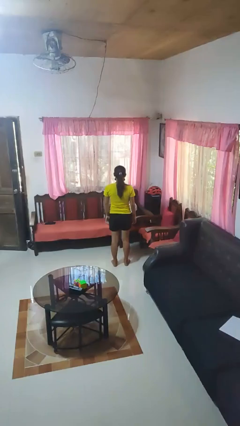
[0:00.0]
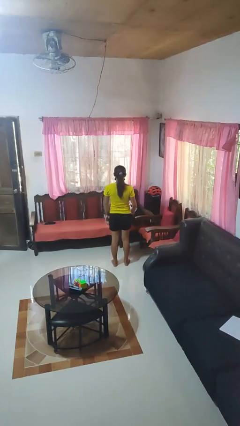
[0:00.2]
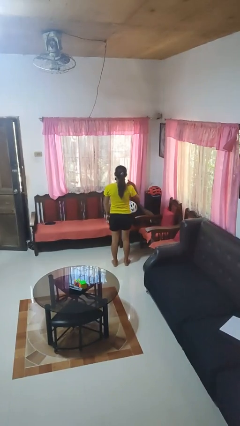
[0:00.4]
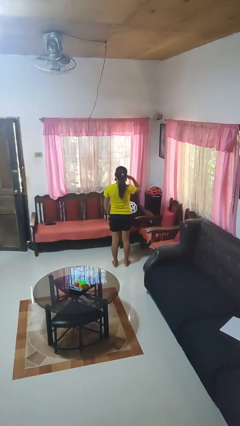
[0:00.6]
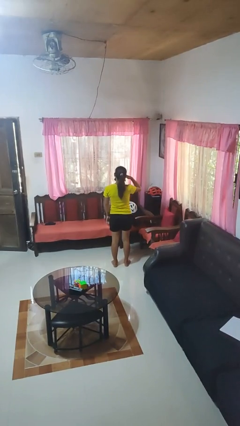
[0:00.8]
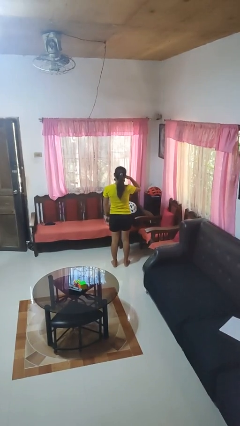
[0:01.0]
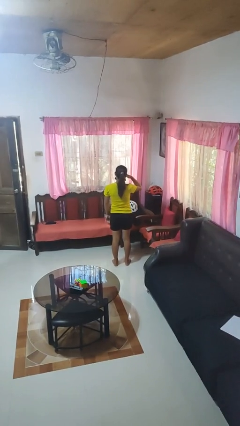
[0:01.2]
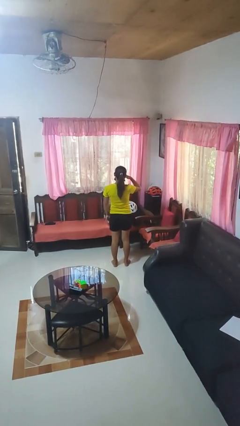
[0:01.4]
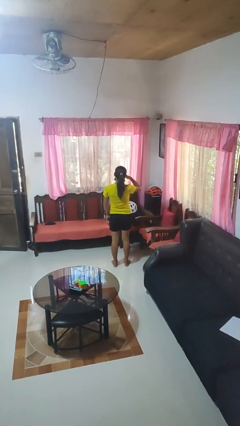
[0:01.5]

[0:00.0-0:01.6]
person gestures call me

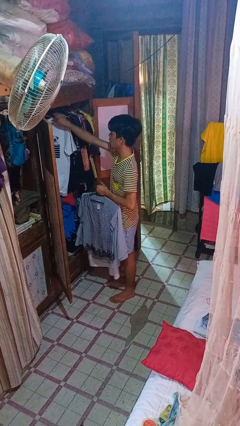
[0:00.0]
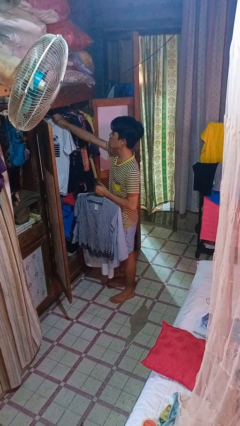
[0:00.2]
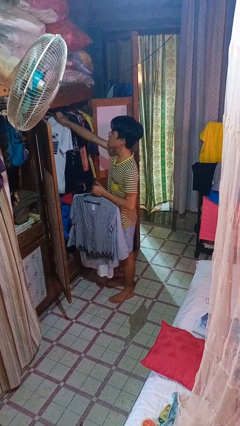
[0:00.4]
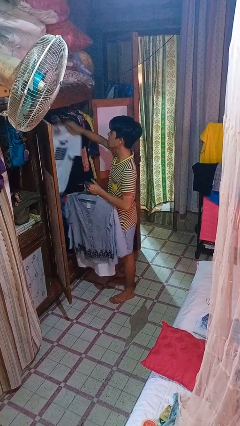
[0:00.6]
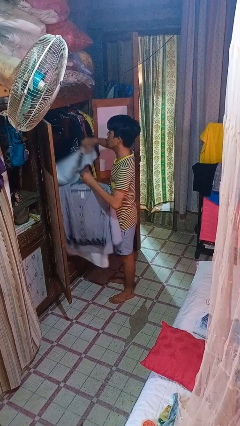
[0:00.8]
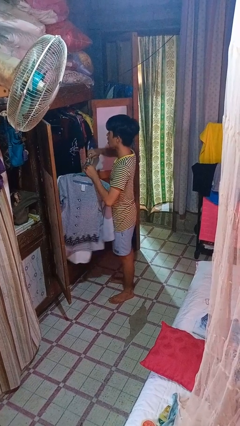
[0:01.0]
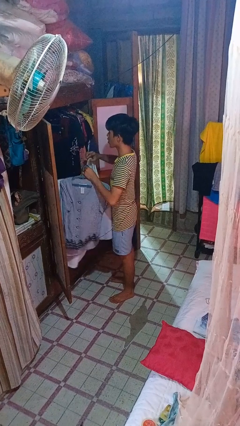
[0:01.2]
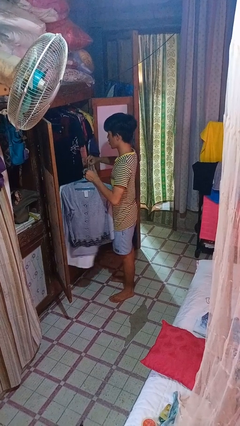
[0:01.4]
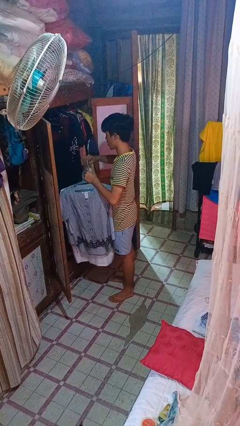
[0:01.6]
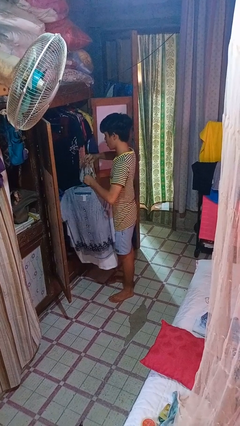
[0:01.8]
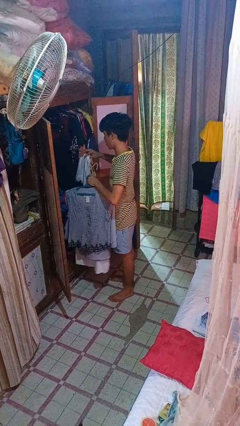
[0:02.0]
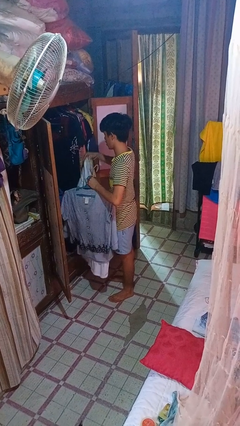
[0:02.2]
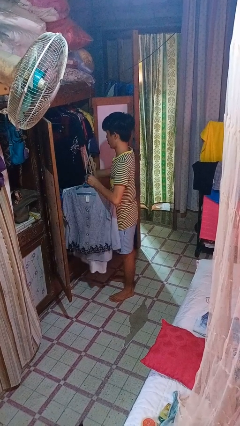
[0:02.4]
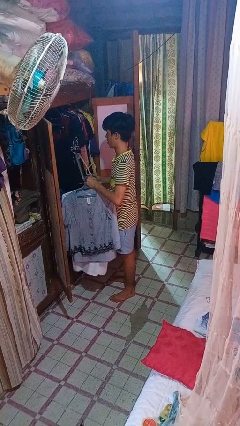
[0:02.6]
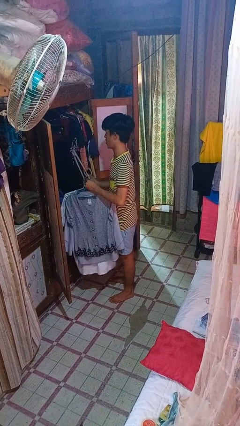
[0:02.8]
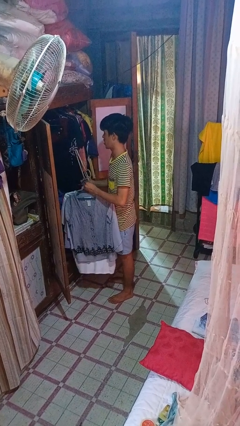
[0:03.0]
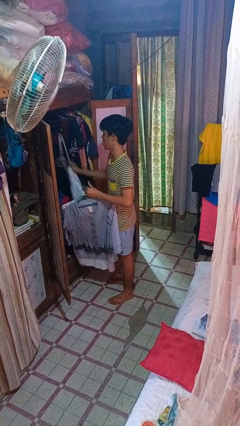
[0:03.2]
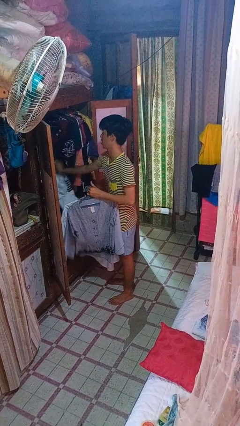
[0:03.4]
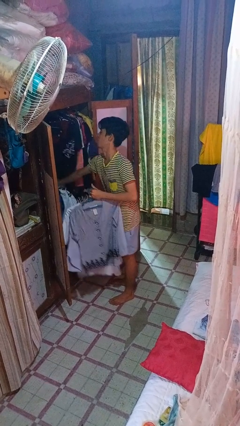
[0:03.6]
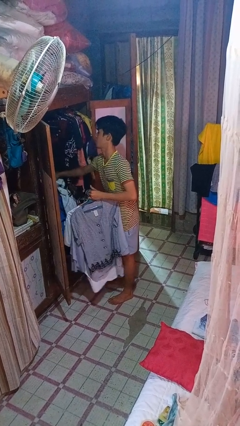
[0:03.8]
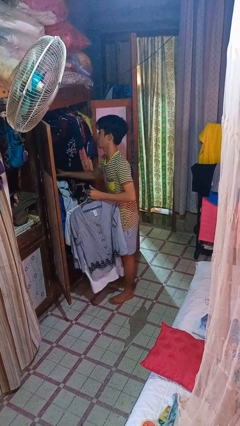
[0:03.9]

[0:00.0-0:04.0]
person takes clothes from closet

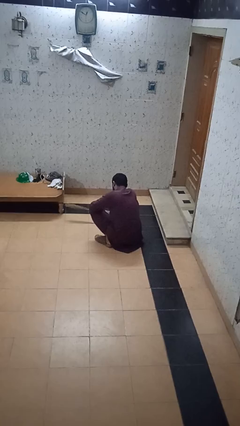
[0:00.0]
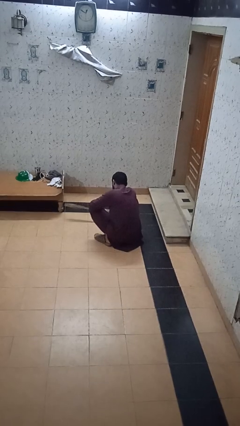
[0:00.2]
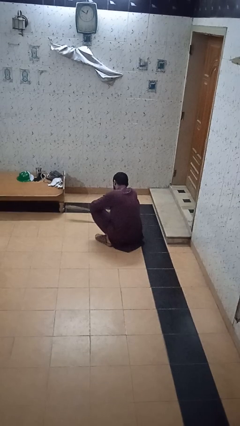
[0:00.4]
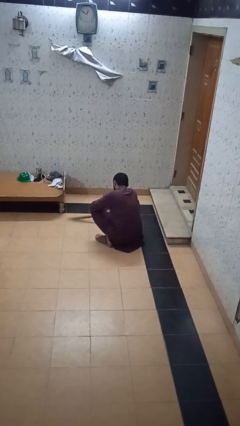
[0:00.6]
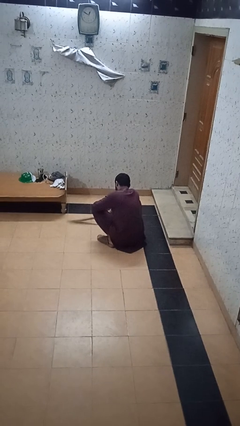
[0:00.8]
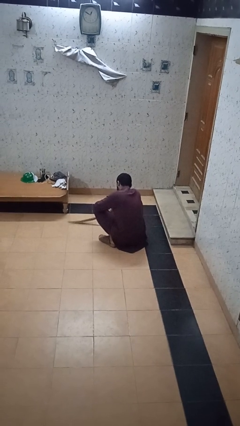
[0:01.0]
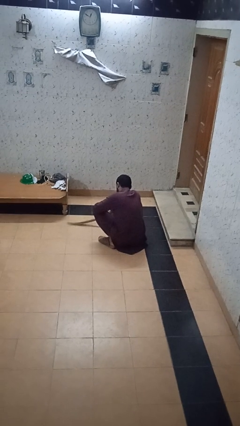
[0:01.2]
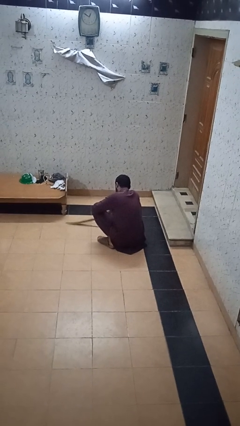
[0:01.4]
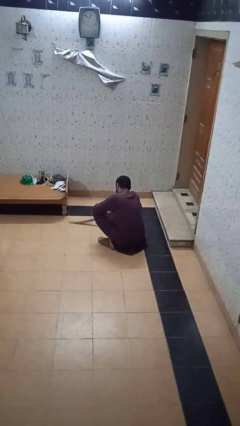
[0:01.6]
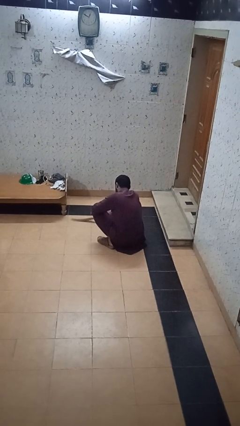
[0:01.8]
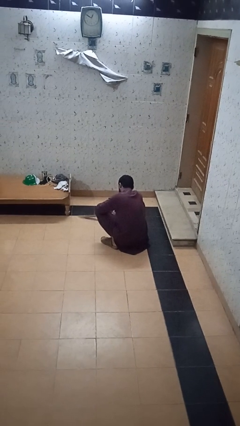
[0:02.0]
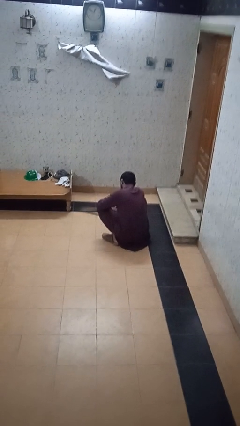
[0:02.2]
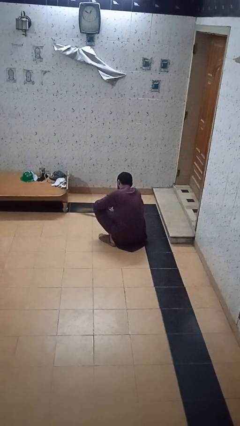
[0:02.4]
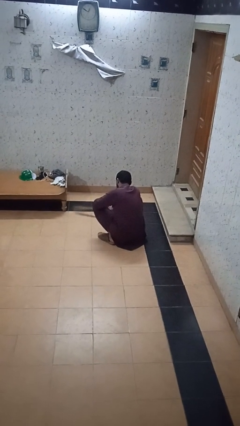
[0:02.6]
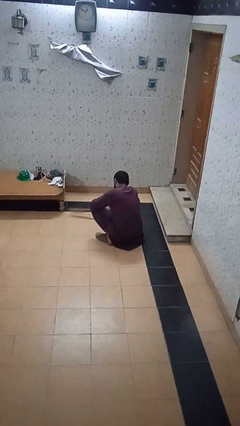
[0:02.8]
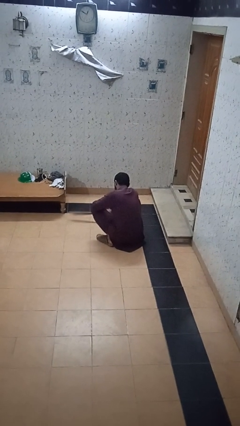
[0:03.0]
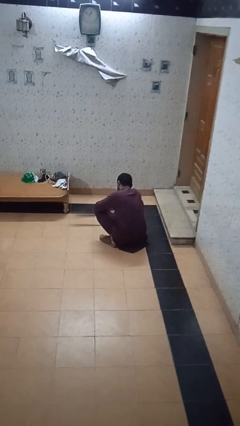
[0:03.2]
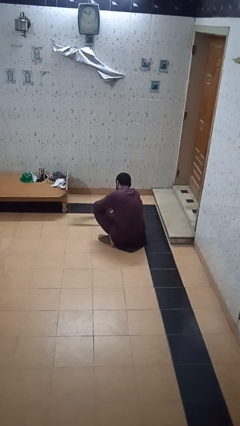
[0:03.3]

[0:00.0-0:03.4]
person sweeps floor

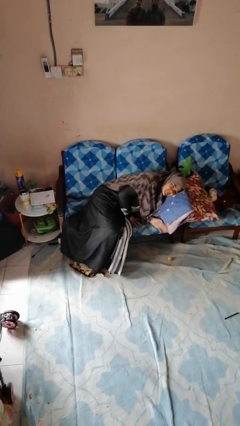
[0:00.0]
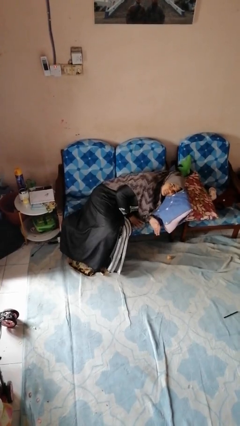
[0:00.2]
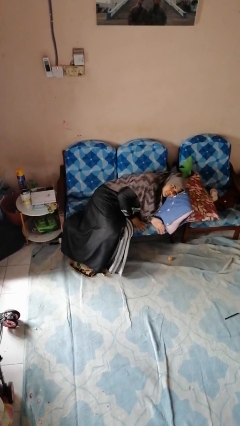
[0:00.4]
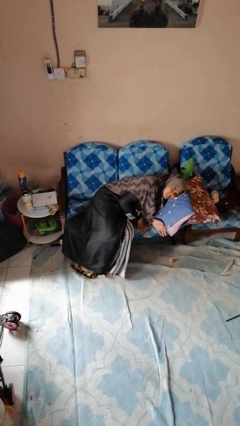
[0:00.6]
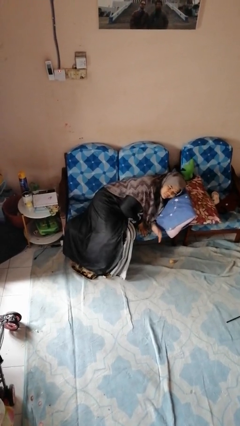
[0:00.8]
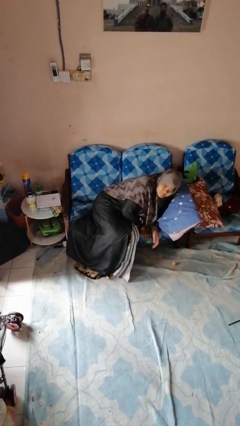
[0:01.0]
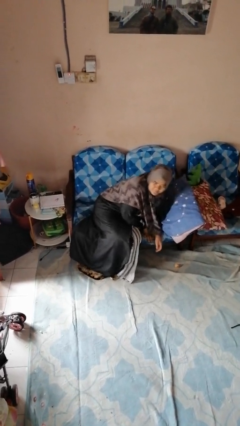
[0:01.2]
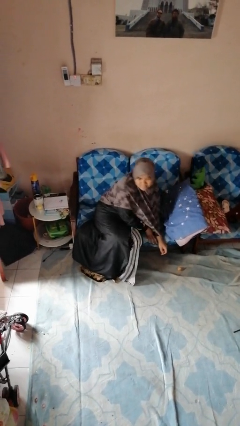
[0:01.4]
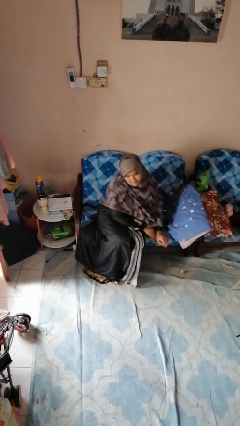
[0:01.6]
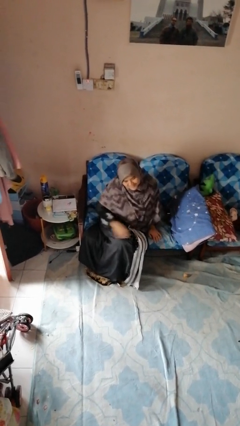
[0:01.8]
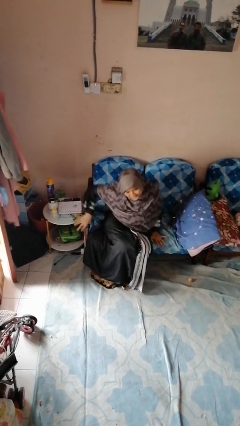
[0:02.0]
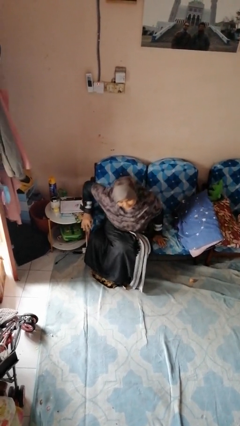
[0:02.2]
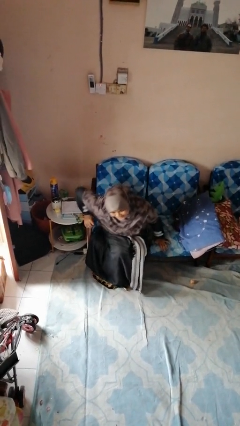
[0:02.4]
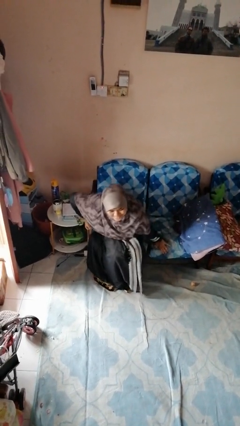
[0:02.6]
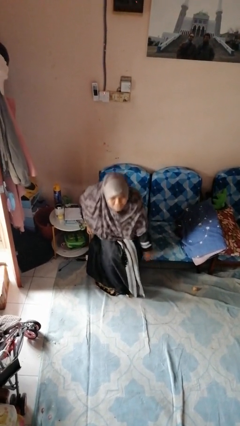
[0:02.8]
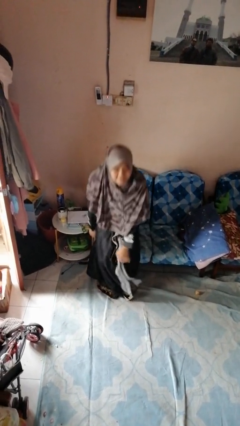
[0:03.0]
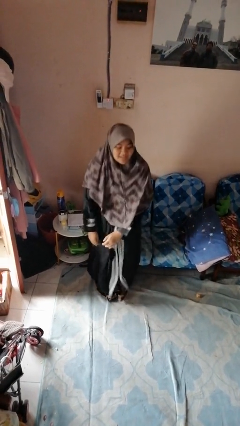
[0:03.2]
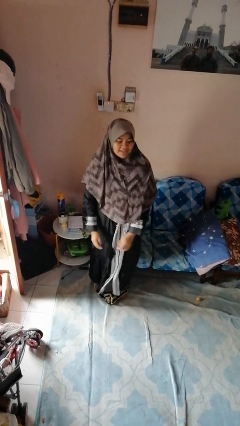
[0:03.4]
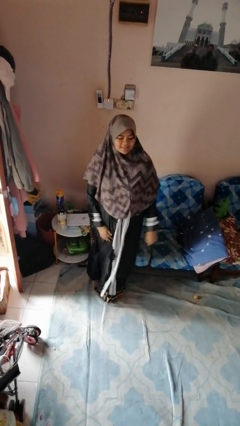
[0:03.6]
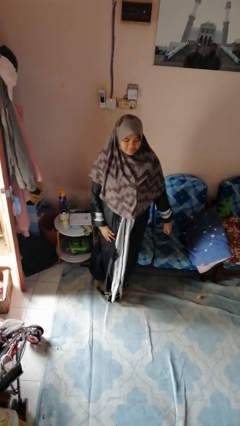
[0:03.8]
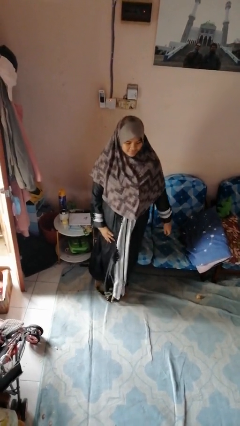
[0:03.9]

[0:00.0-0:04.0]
person stands up

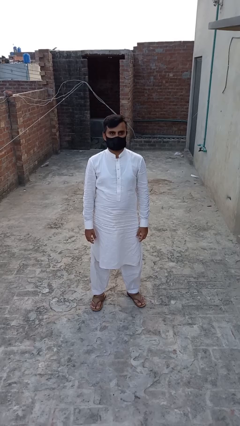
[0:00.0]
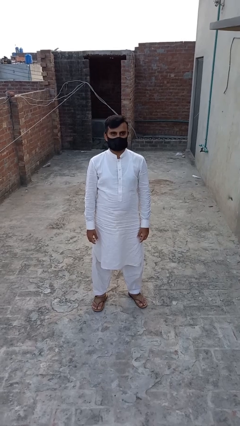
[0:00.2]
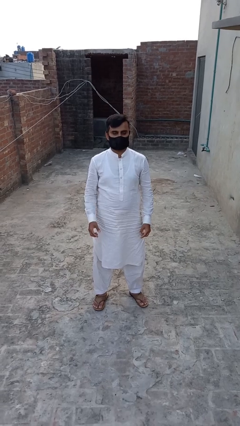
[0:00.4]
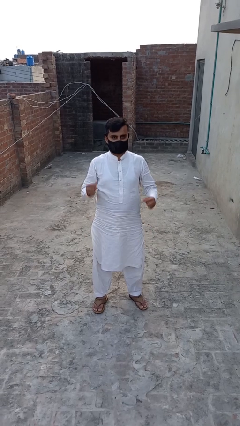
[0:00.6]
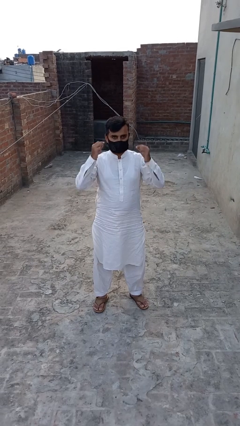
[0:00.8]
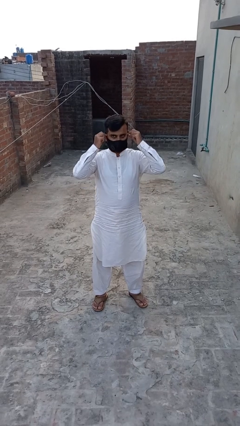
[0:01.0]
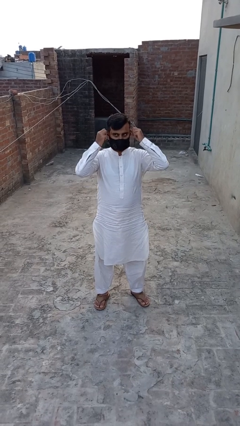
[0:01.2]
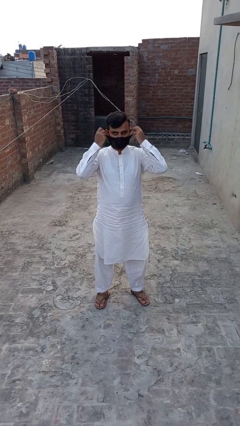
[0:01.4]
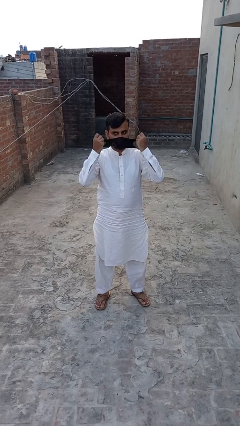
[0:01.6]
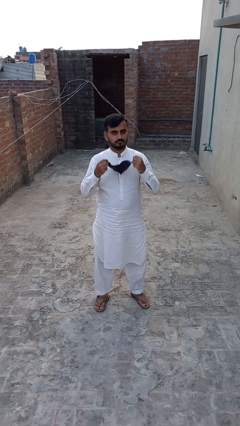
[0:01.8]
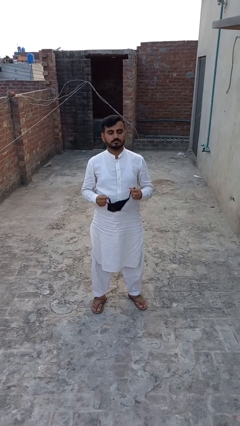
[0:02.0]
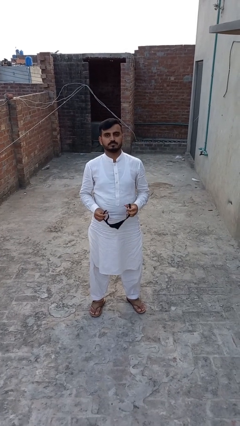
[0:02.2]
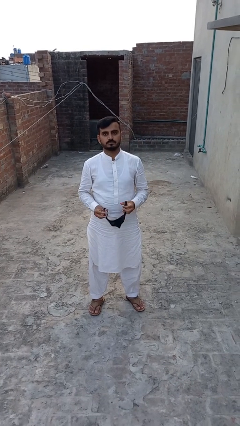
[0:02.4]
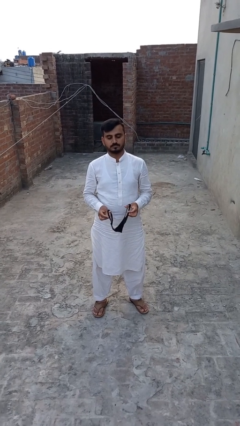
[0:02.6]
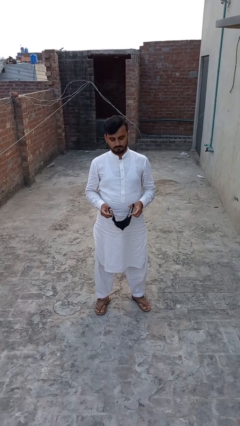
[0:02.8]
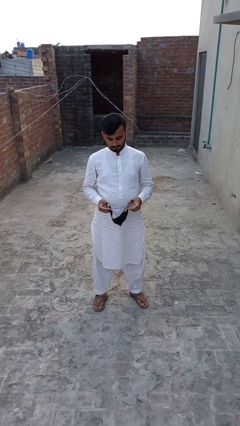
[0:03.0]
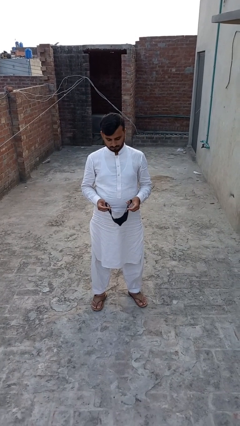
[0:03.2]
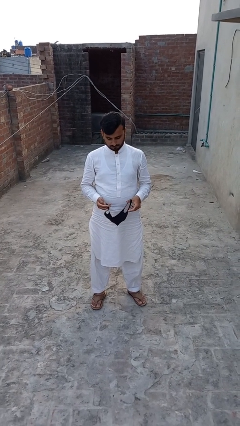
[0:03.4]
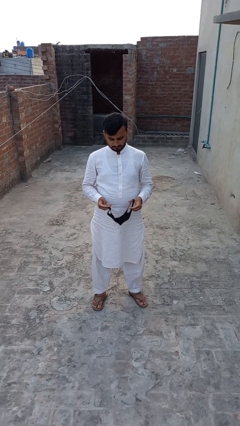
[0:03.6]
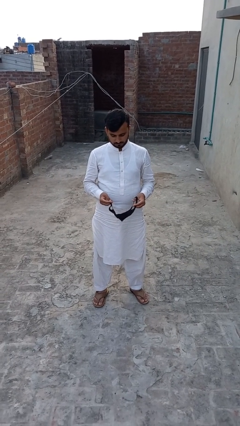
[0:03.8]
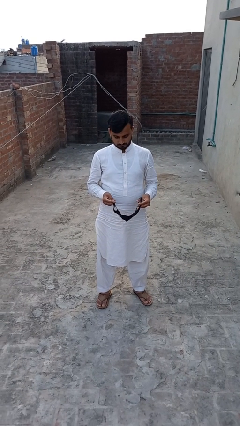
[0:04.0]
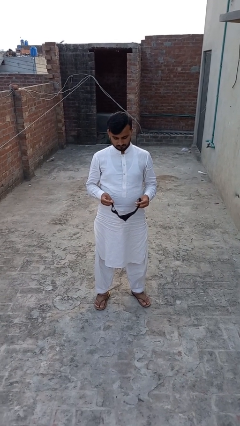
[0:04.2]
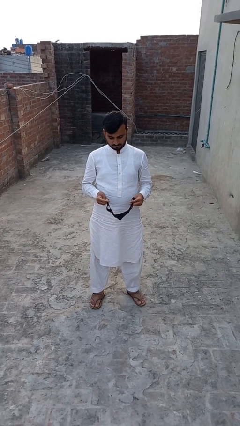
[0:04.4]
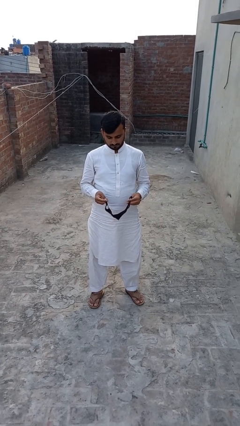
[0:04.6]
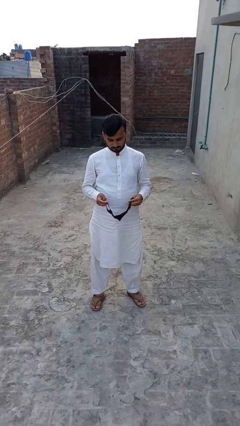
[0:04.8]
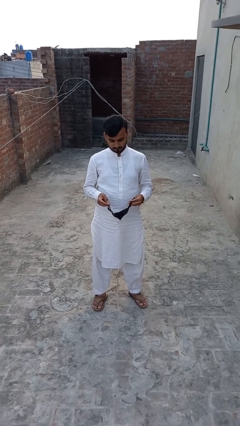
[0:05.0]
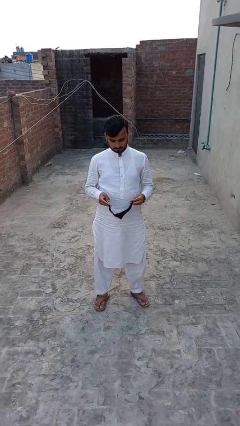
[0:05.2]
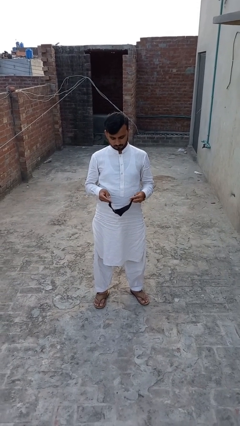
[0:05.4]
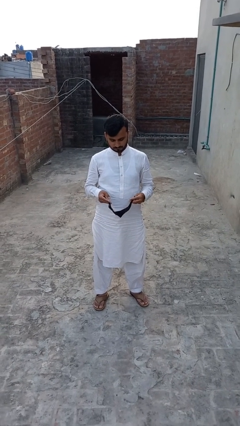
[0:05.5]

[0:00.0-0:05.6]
person takes off facemask
